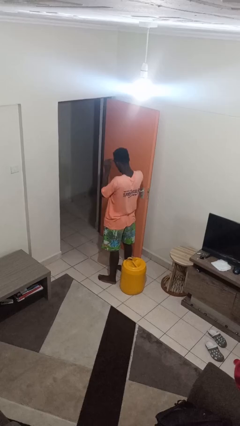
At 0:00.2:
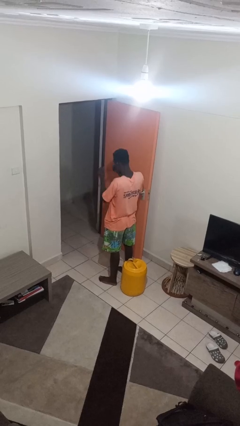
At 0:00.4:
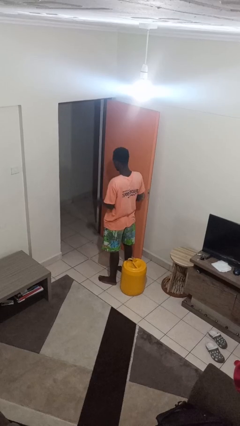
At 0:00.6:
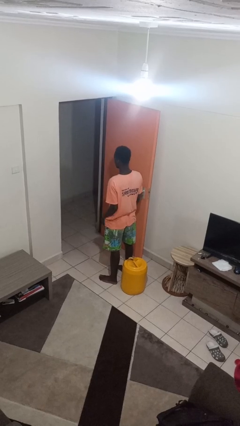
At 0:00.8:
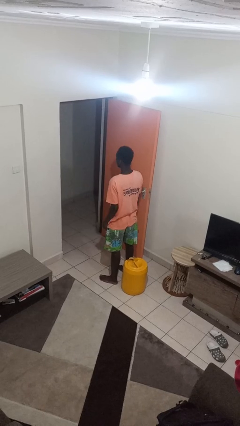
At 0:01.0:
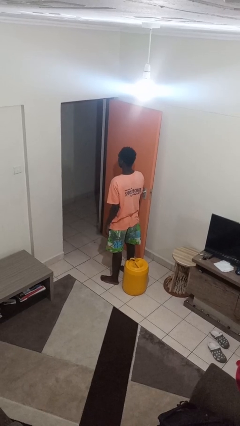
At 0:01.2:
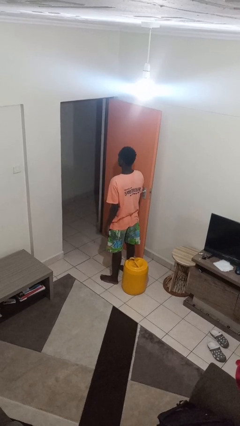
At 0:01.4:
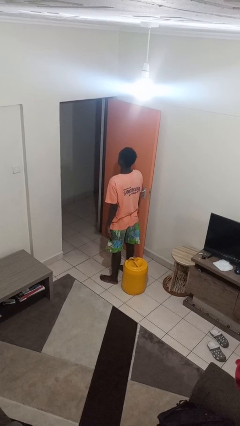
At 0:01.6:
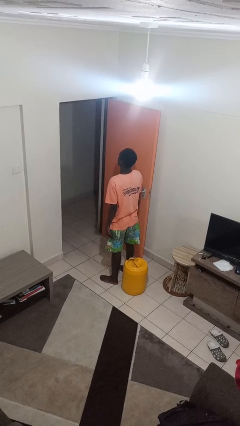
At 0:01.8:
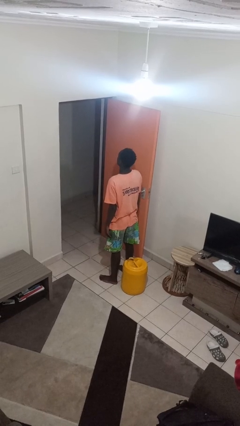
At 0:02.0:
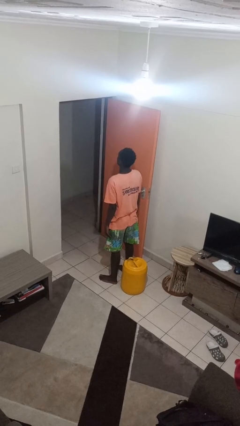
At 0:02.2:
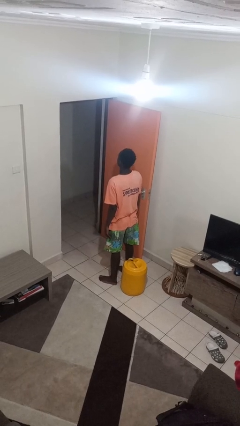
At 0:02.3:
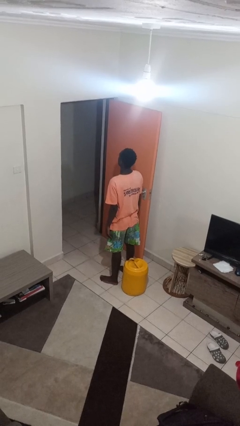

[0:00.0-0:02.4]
person takes off glasses

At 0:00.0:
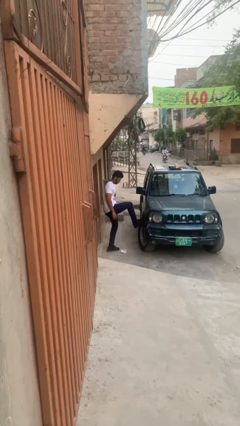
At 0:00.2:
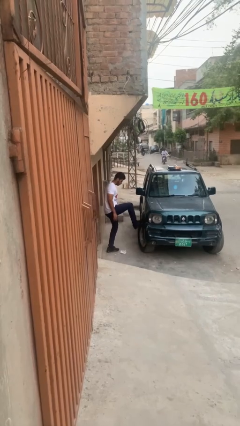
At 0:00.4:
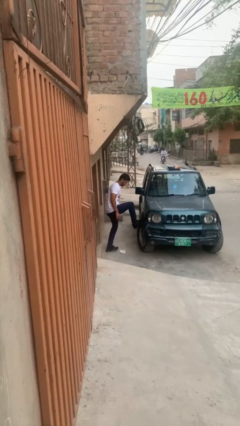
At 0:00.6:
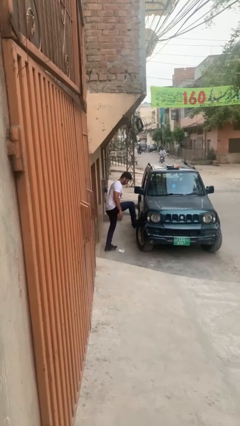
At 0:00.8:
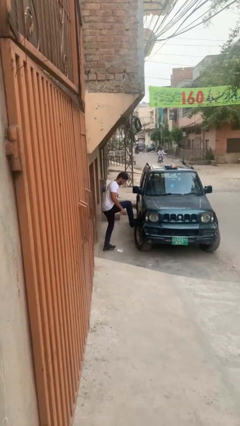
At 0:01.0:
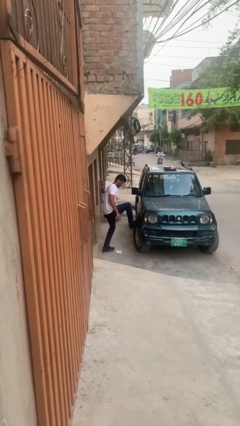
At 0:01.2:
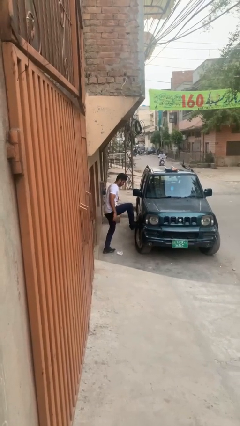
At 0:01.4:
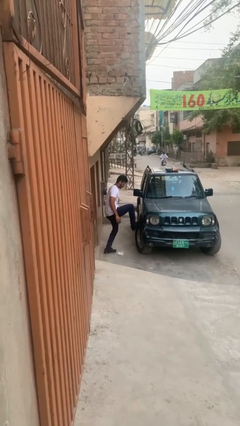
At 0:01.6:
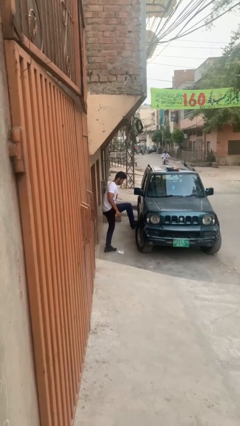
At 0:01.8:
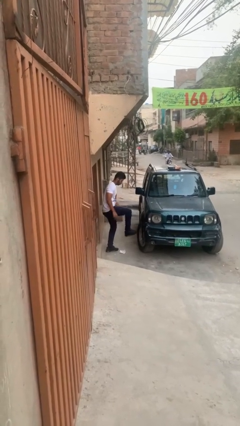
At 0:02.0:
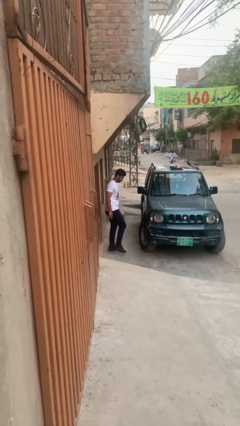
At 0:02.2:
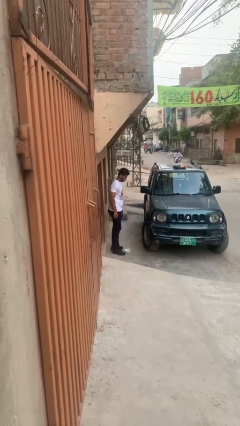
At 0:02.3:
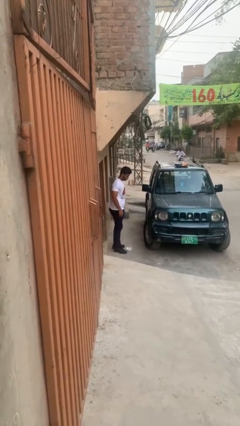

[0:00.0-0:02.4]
person kicks car tires

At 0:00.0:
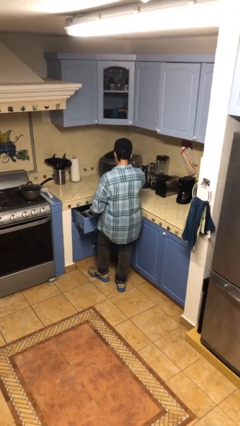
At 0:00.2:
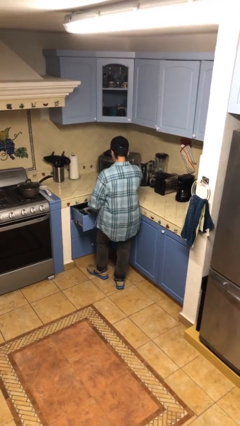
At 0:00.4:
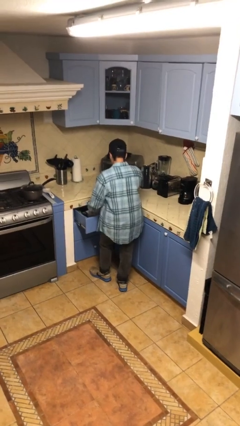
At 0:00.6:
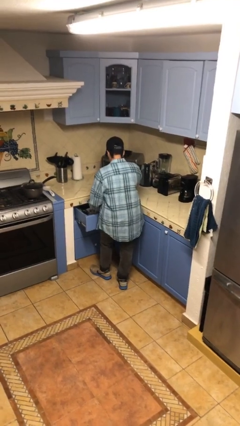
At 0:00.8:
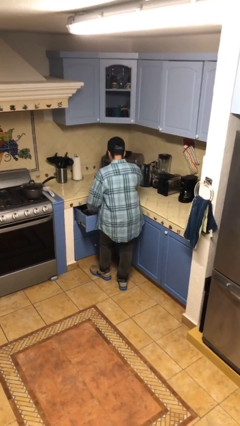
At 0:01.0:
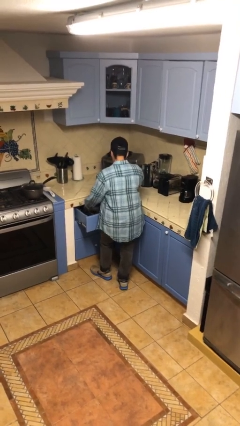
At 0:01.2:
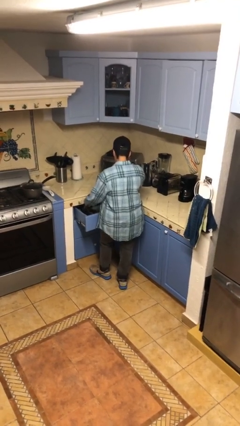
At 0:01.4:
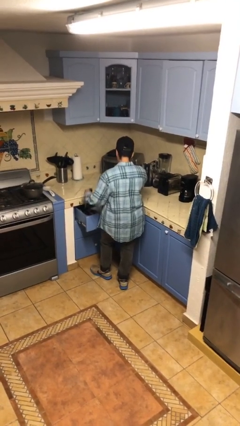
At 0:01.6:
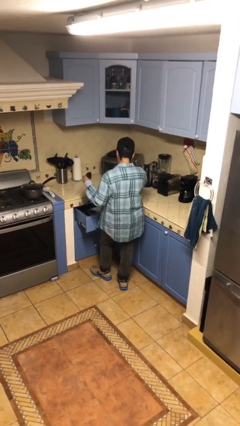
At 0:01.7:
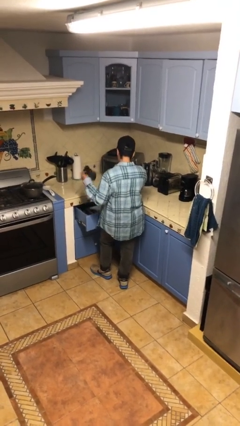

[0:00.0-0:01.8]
person takes object from kitchen drawer

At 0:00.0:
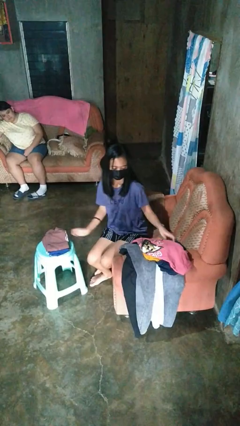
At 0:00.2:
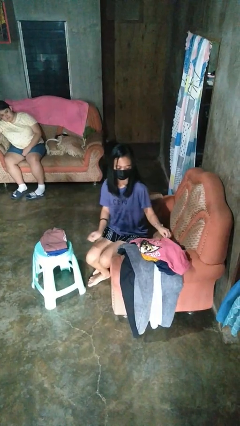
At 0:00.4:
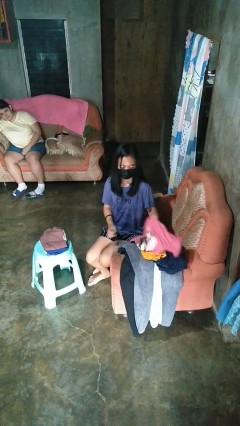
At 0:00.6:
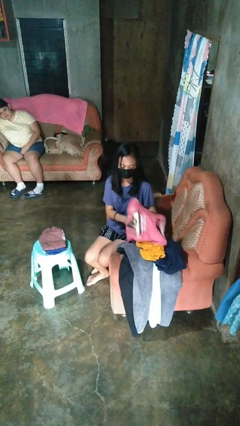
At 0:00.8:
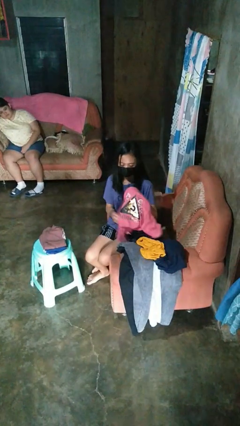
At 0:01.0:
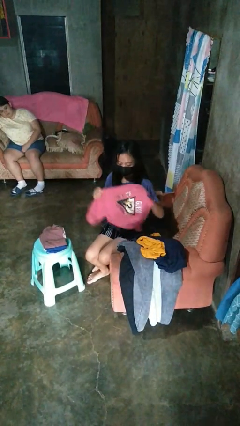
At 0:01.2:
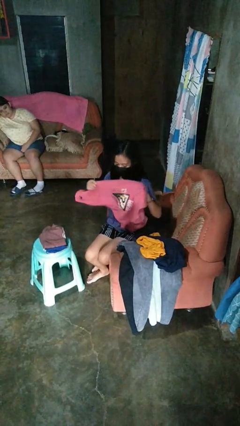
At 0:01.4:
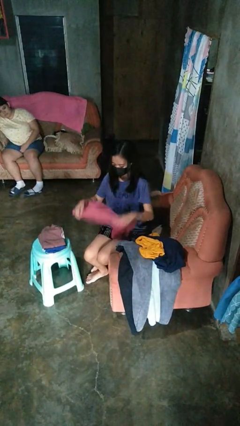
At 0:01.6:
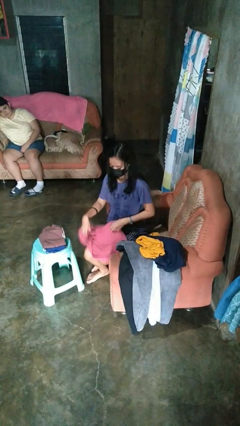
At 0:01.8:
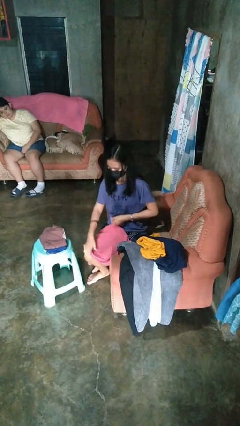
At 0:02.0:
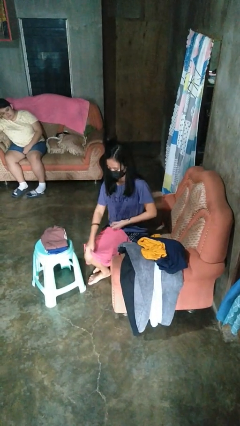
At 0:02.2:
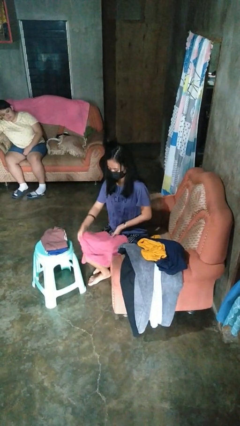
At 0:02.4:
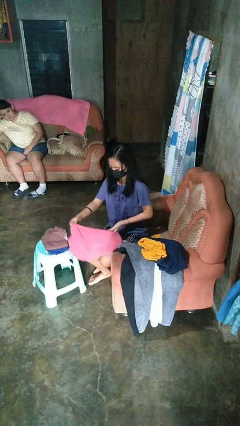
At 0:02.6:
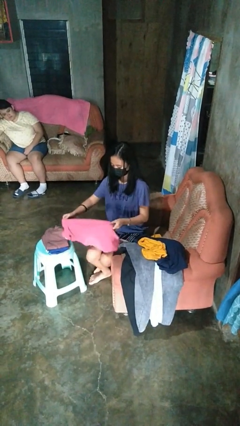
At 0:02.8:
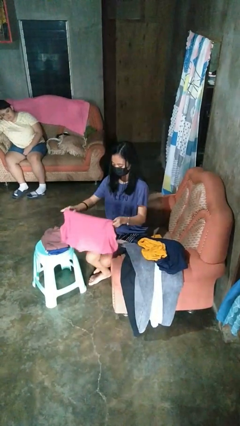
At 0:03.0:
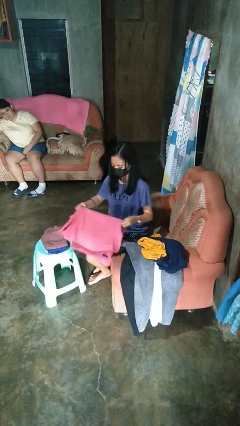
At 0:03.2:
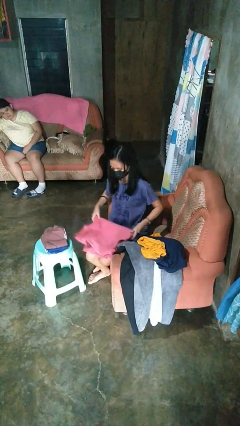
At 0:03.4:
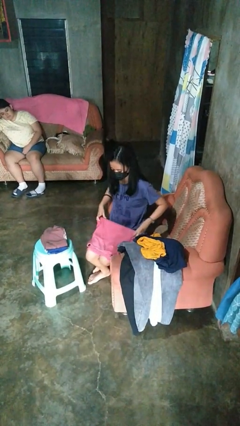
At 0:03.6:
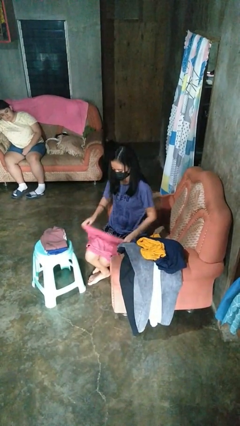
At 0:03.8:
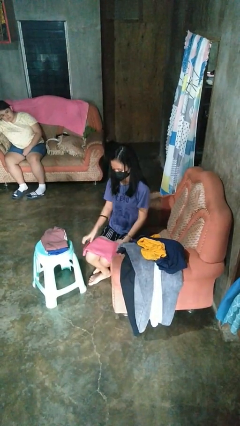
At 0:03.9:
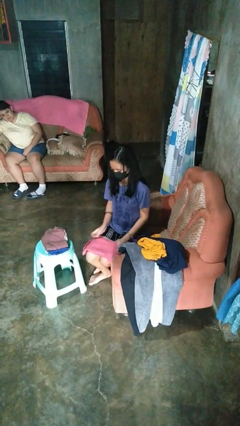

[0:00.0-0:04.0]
person folds shirt

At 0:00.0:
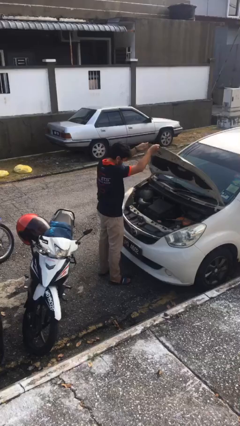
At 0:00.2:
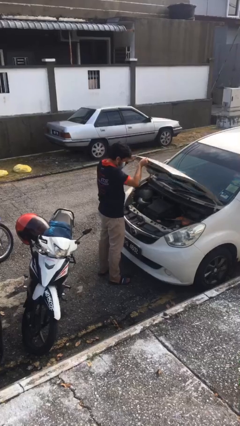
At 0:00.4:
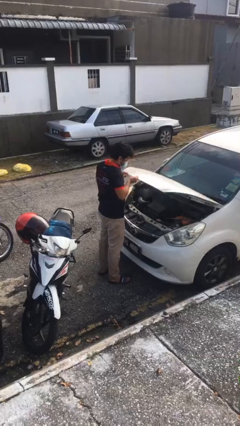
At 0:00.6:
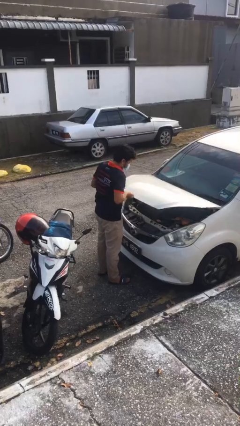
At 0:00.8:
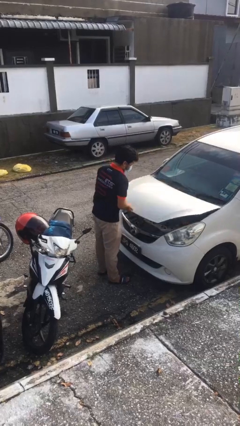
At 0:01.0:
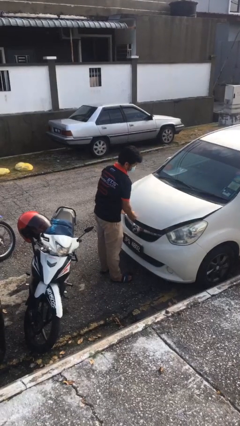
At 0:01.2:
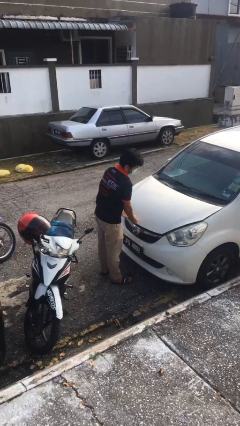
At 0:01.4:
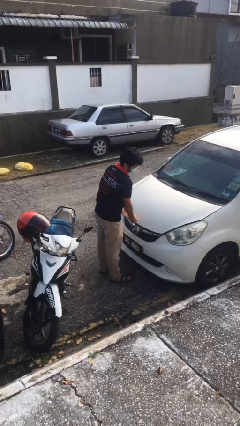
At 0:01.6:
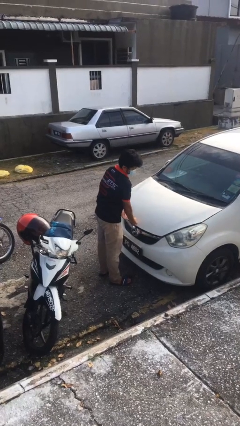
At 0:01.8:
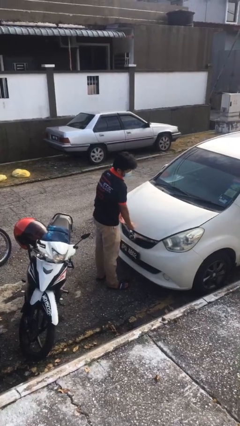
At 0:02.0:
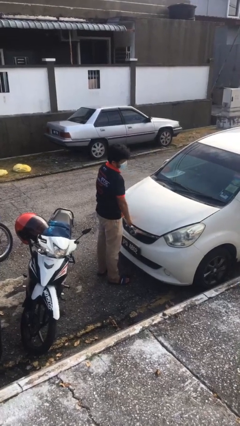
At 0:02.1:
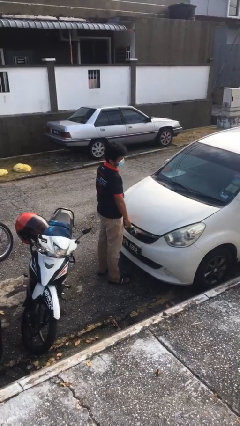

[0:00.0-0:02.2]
person closes car hood

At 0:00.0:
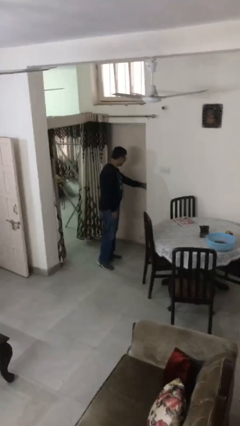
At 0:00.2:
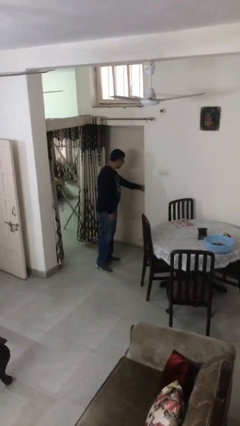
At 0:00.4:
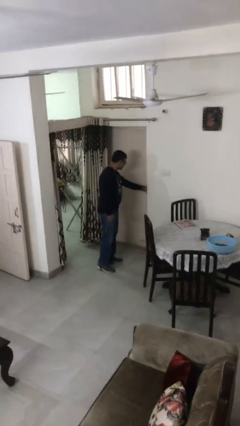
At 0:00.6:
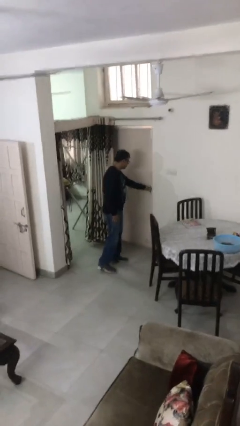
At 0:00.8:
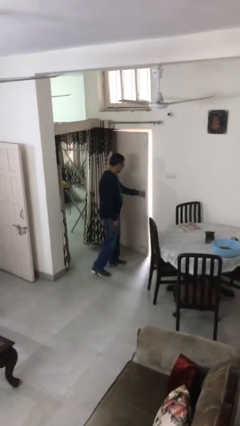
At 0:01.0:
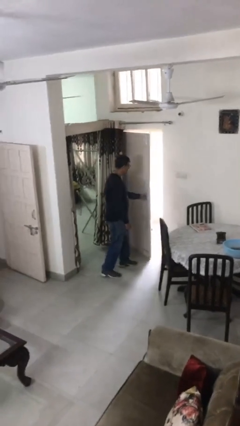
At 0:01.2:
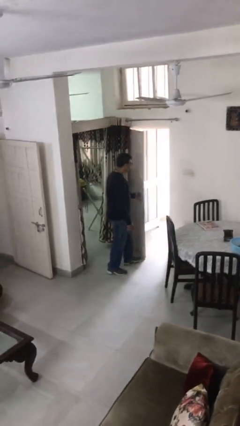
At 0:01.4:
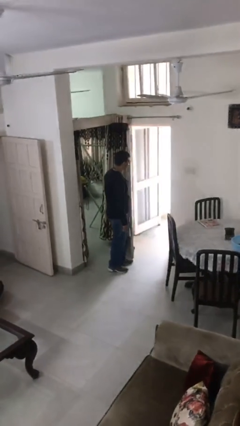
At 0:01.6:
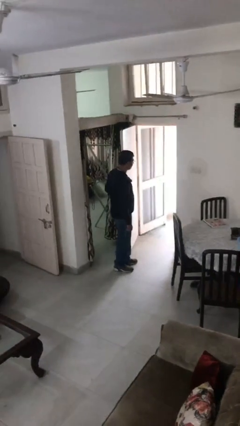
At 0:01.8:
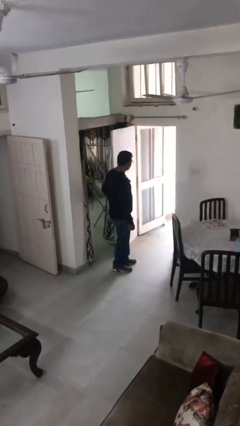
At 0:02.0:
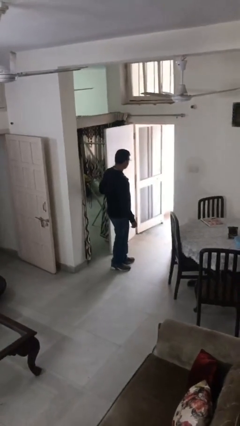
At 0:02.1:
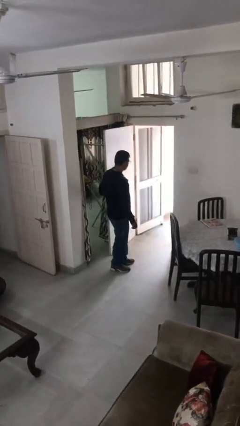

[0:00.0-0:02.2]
person opens facility door

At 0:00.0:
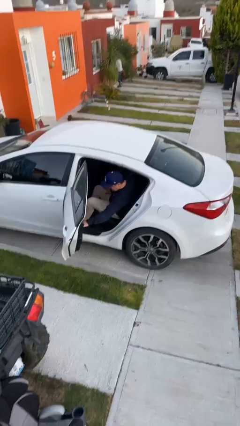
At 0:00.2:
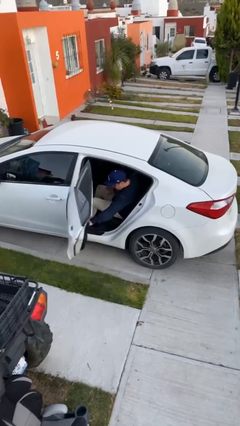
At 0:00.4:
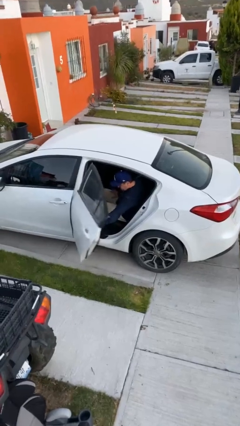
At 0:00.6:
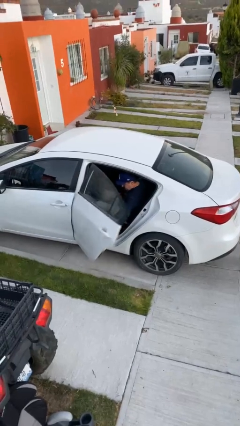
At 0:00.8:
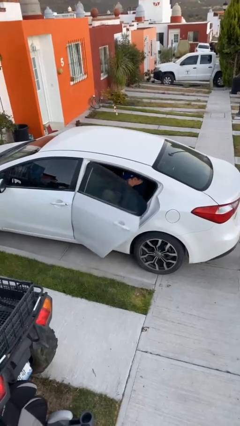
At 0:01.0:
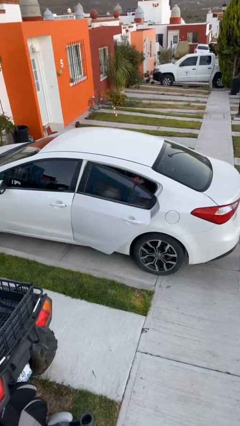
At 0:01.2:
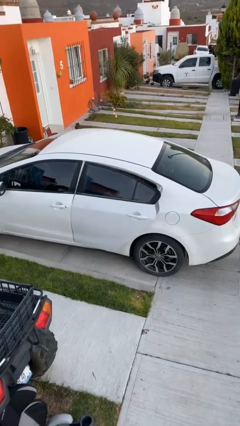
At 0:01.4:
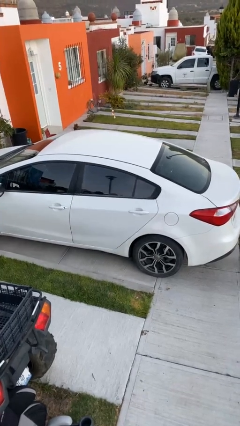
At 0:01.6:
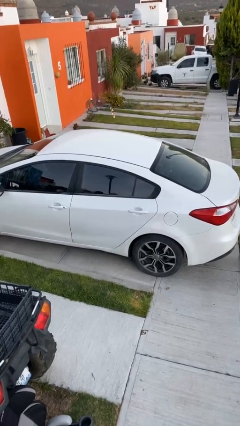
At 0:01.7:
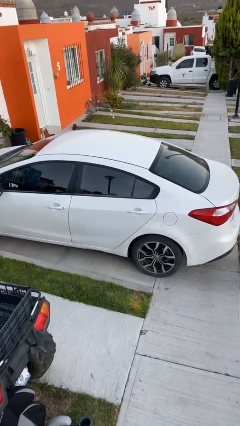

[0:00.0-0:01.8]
person closes car door
